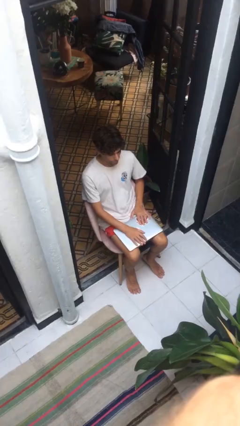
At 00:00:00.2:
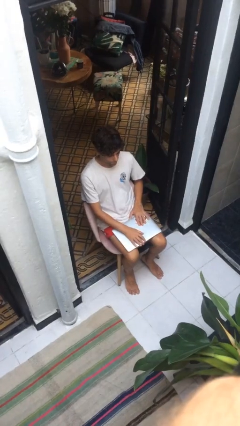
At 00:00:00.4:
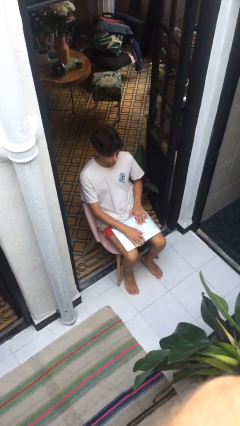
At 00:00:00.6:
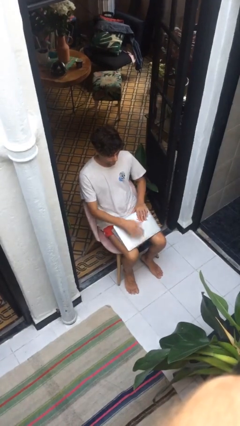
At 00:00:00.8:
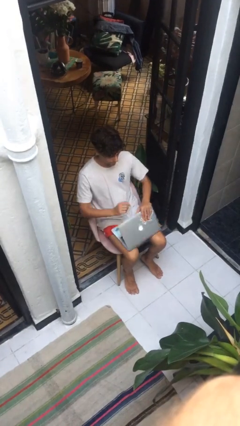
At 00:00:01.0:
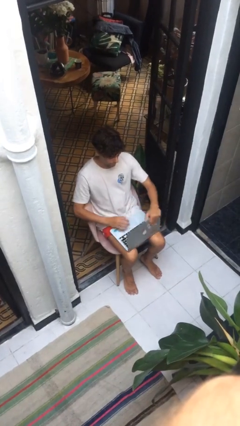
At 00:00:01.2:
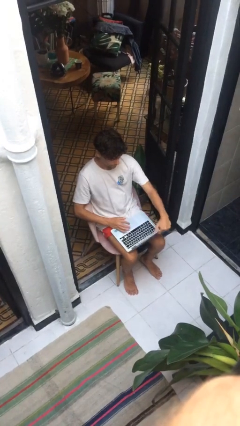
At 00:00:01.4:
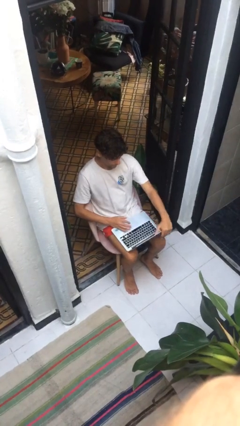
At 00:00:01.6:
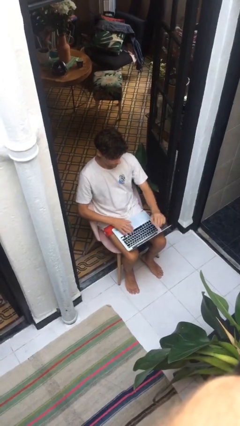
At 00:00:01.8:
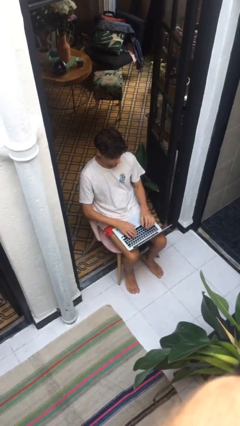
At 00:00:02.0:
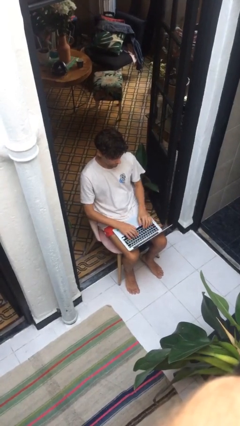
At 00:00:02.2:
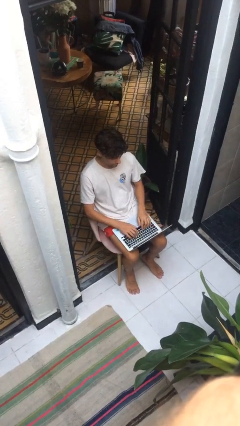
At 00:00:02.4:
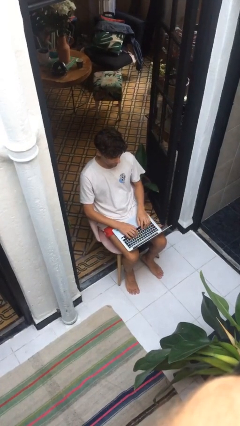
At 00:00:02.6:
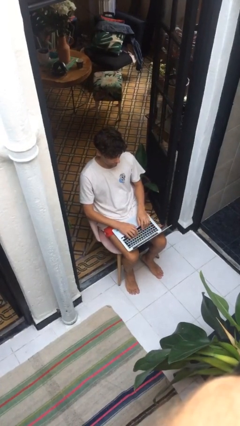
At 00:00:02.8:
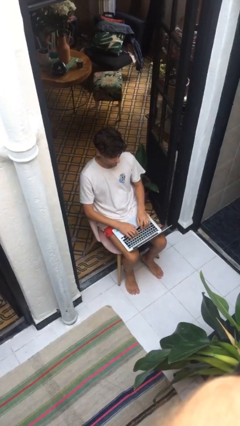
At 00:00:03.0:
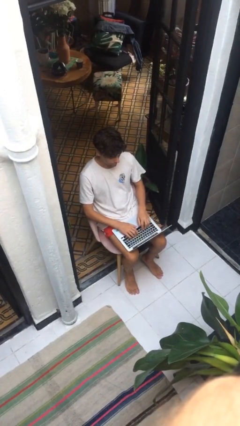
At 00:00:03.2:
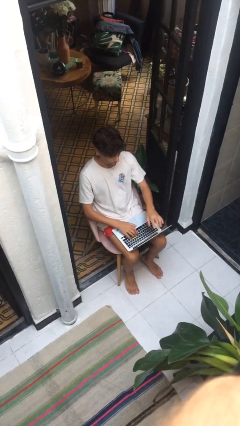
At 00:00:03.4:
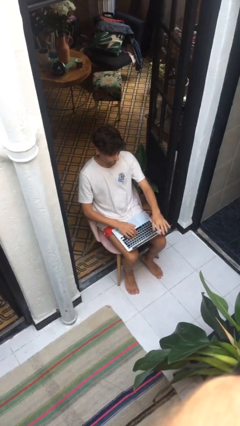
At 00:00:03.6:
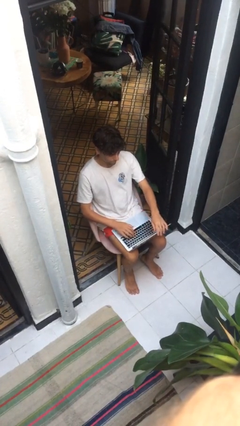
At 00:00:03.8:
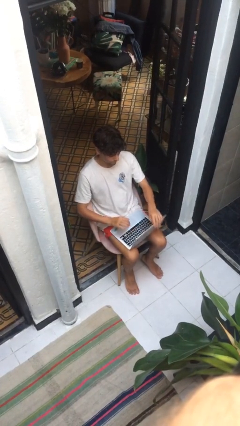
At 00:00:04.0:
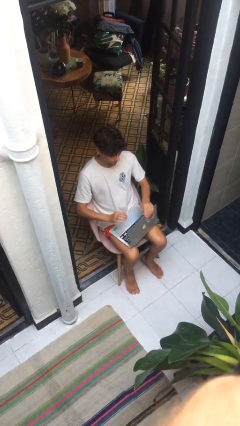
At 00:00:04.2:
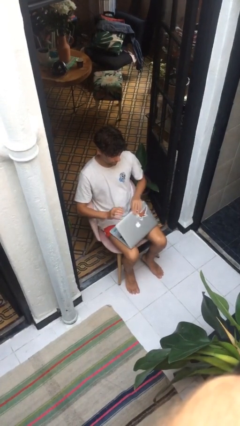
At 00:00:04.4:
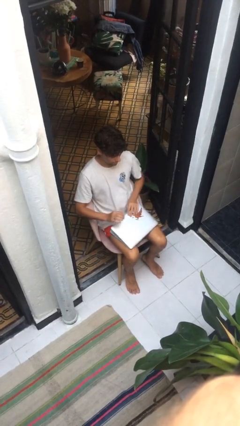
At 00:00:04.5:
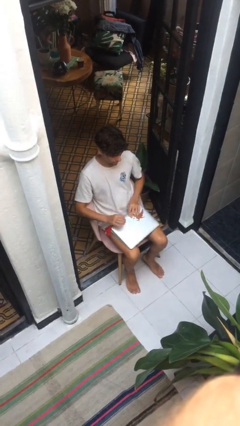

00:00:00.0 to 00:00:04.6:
person interacts with laptop

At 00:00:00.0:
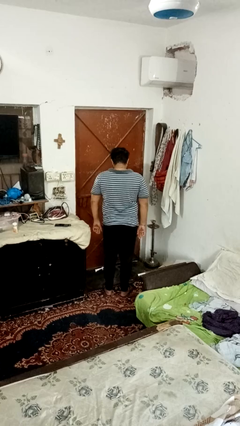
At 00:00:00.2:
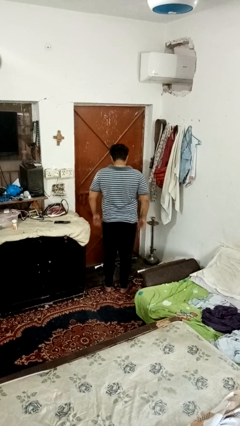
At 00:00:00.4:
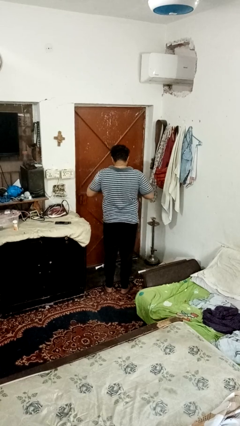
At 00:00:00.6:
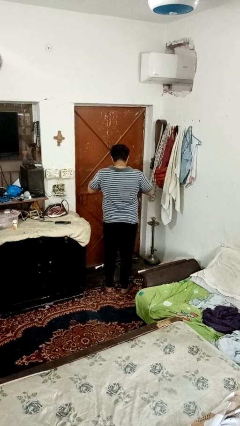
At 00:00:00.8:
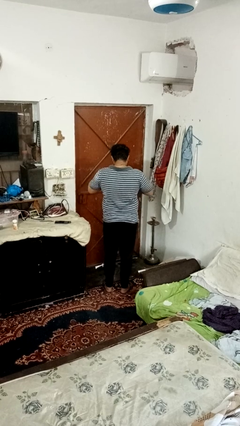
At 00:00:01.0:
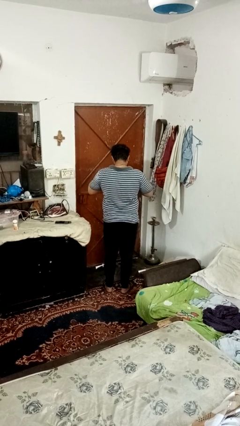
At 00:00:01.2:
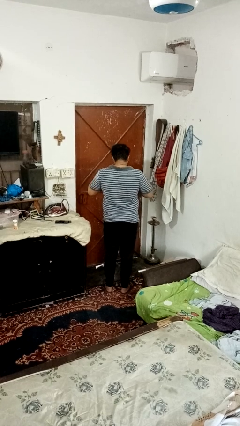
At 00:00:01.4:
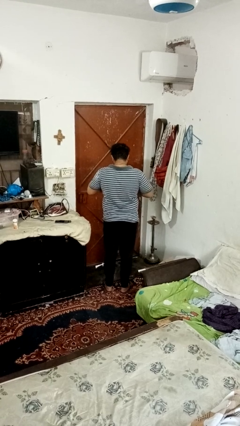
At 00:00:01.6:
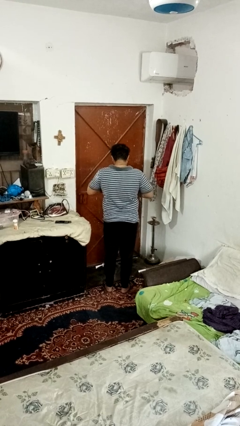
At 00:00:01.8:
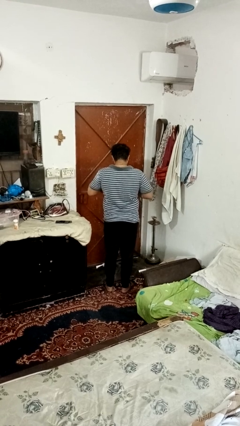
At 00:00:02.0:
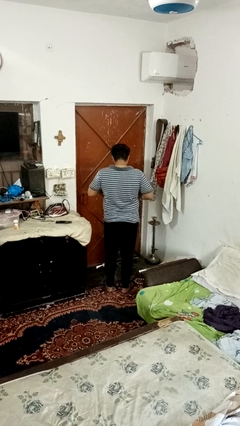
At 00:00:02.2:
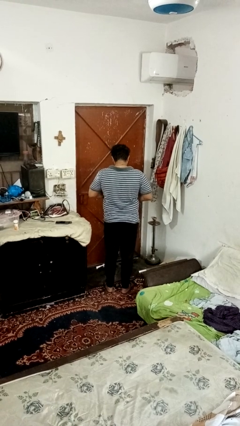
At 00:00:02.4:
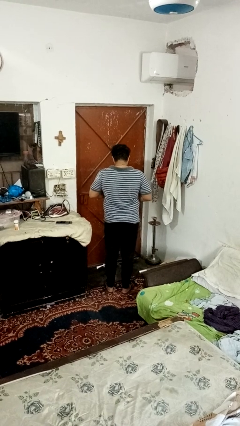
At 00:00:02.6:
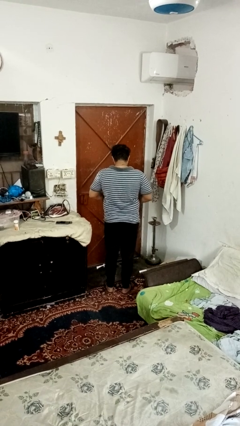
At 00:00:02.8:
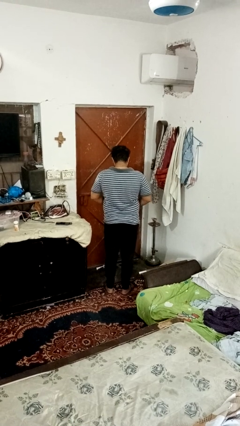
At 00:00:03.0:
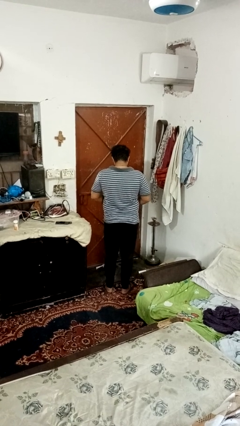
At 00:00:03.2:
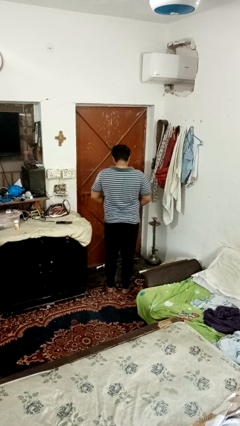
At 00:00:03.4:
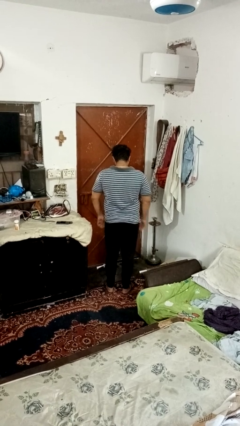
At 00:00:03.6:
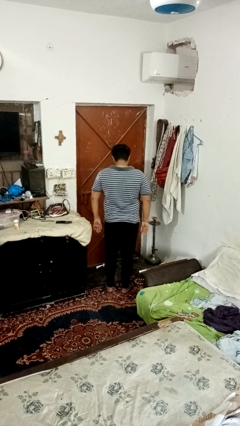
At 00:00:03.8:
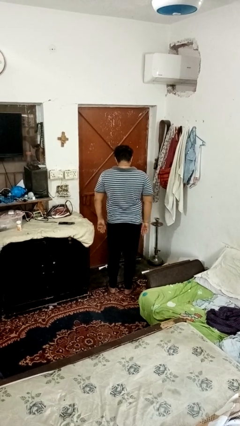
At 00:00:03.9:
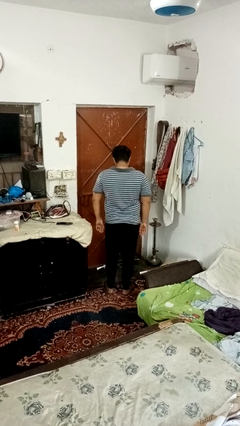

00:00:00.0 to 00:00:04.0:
person unbuttons shirt

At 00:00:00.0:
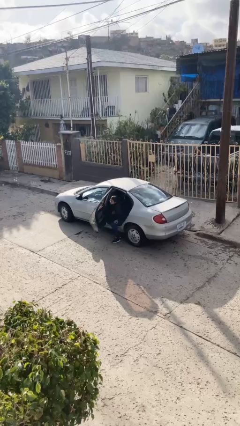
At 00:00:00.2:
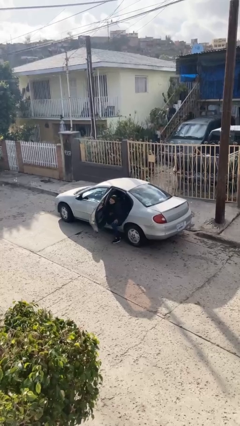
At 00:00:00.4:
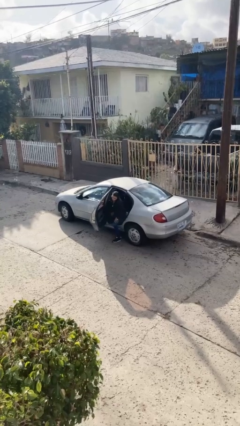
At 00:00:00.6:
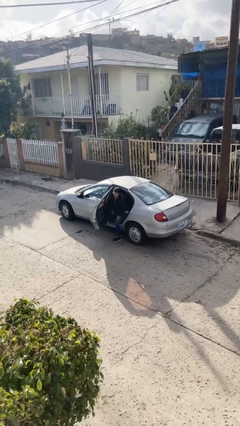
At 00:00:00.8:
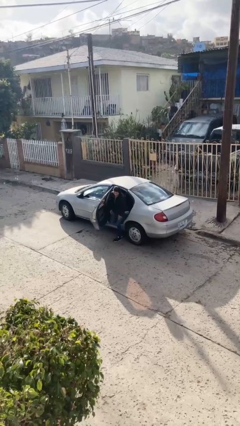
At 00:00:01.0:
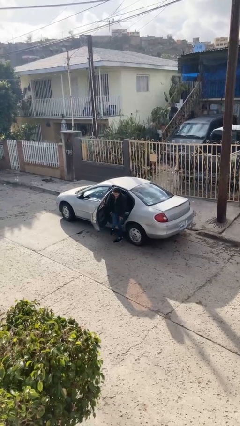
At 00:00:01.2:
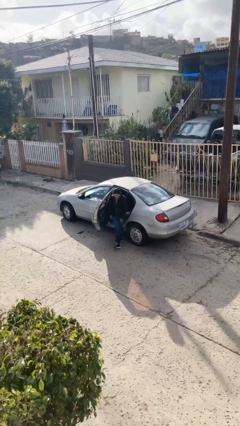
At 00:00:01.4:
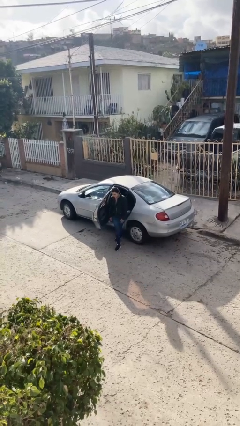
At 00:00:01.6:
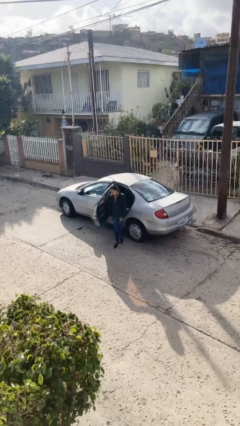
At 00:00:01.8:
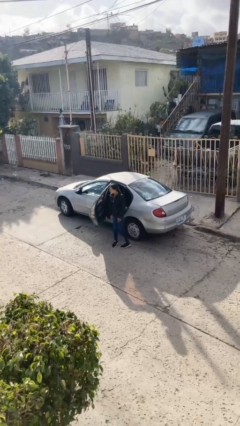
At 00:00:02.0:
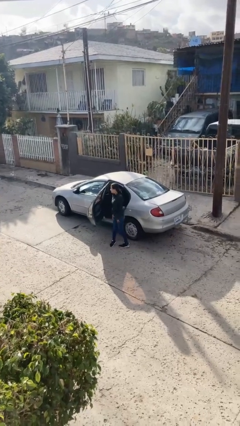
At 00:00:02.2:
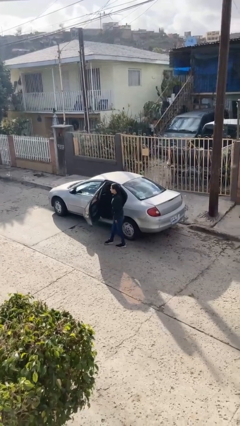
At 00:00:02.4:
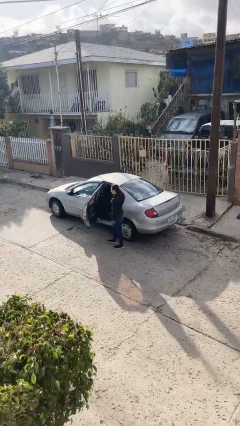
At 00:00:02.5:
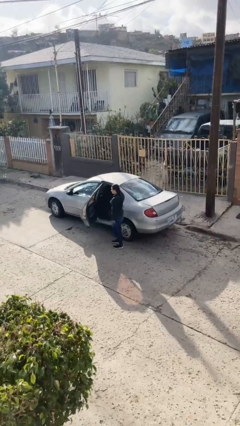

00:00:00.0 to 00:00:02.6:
person exits car

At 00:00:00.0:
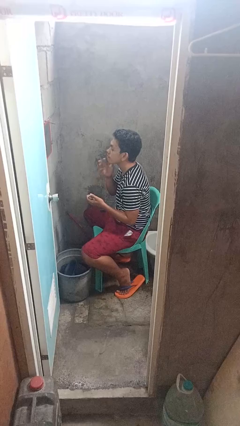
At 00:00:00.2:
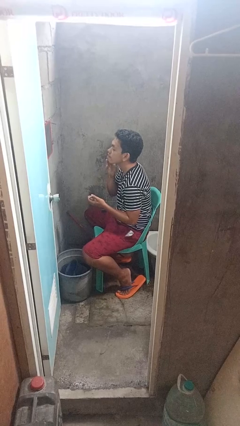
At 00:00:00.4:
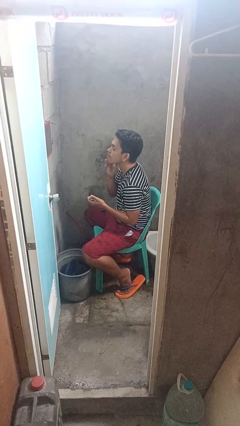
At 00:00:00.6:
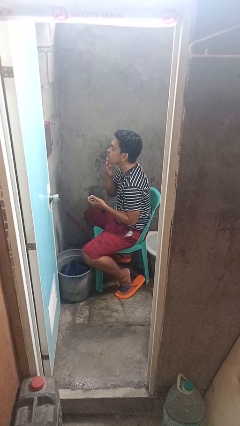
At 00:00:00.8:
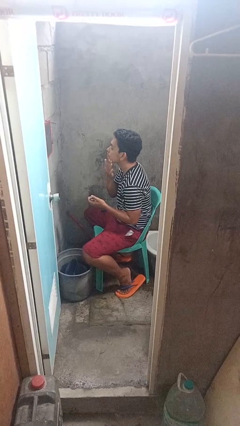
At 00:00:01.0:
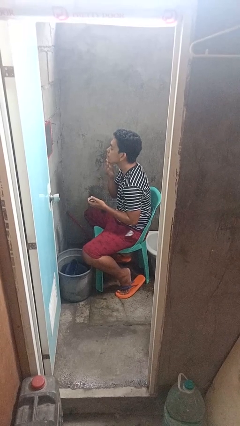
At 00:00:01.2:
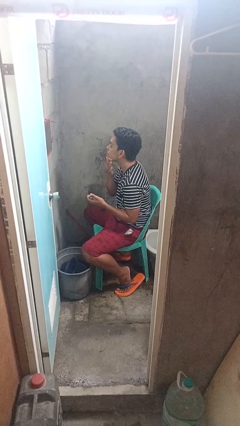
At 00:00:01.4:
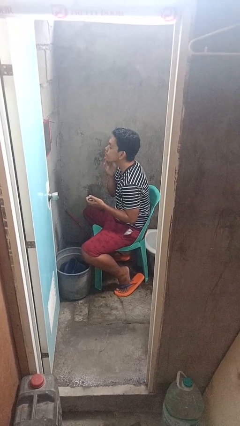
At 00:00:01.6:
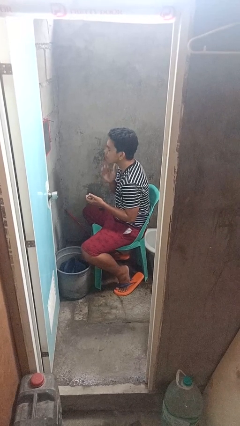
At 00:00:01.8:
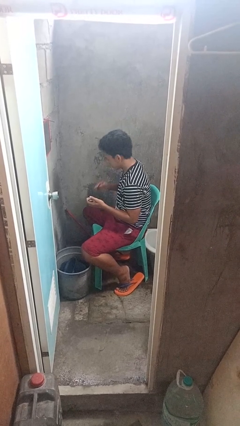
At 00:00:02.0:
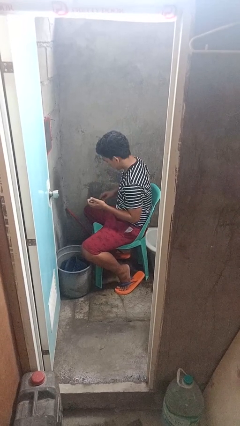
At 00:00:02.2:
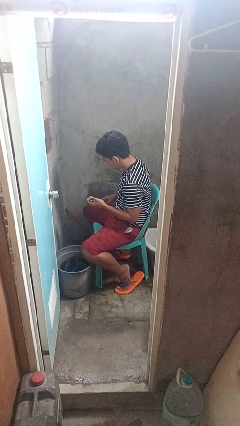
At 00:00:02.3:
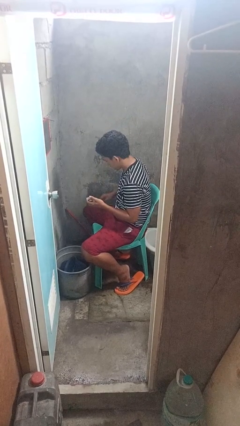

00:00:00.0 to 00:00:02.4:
person applies shaving cream

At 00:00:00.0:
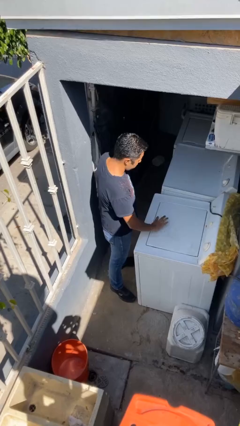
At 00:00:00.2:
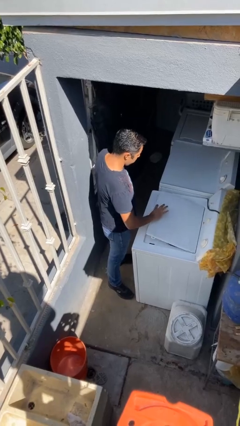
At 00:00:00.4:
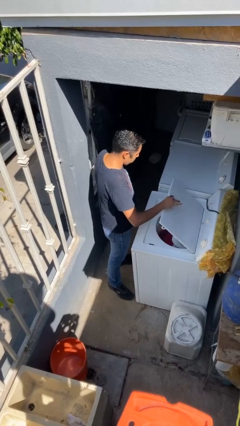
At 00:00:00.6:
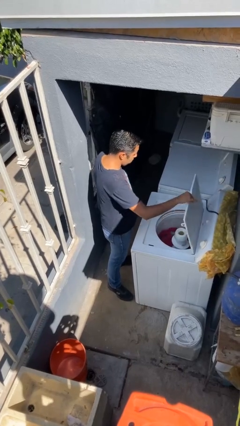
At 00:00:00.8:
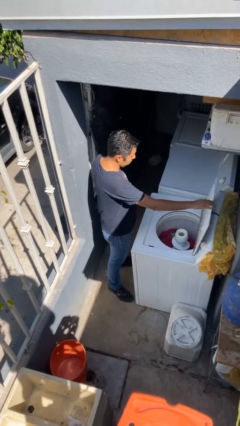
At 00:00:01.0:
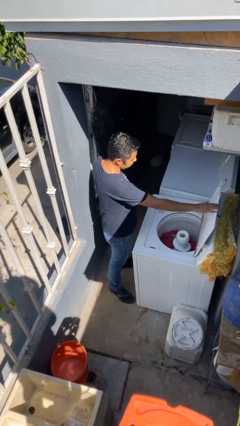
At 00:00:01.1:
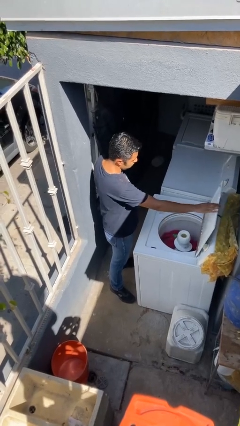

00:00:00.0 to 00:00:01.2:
person opens clothes washer

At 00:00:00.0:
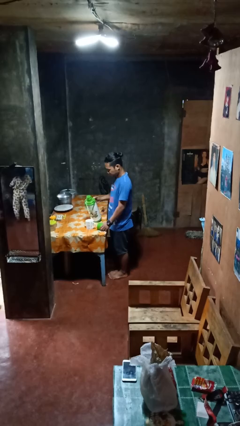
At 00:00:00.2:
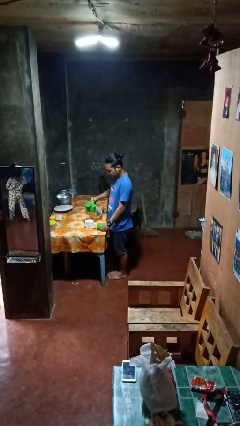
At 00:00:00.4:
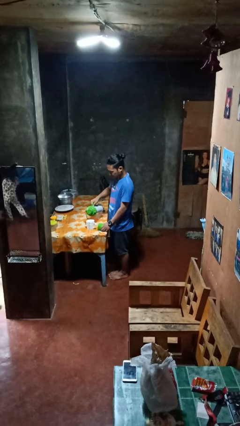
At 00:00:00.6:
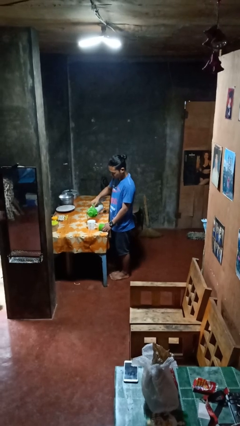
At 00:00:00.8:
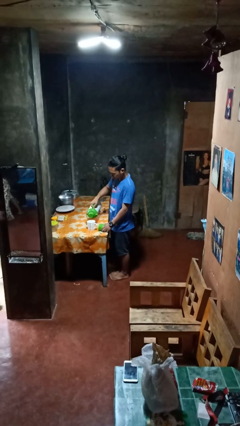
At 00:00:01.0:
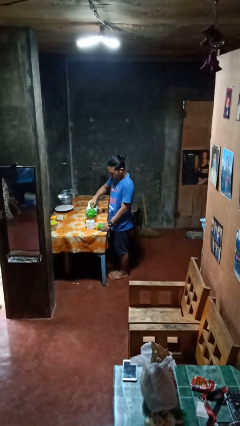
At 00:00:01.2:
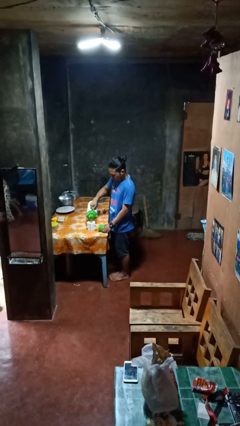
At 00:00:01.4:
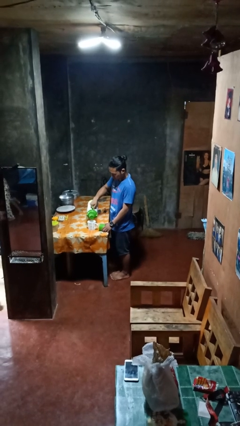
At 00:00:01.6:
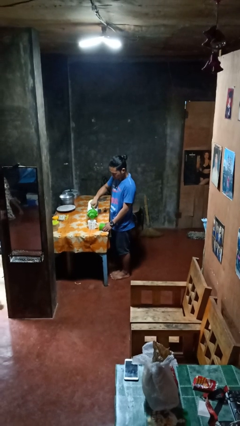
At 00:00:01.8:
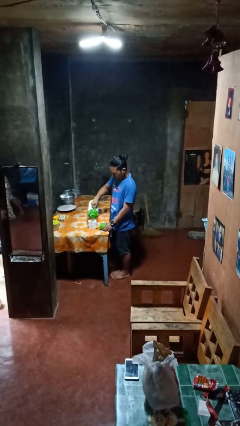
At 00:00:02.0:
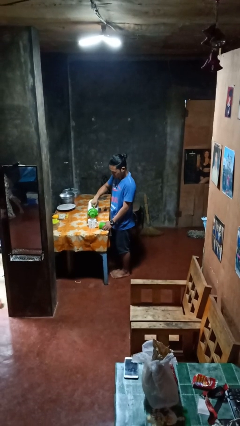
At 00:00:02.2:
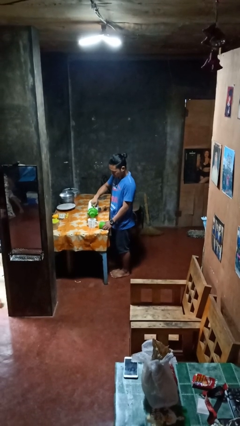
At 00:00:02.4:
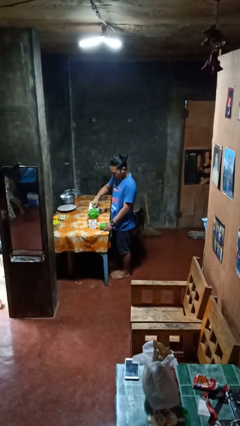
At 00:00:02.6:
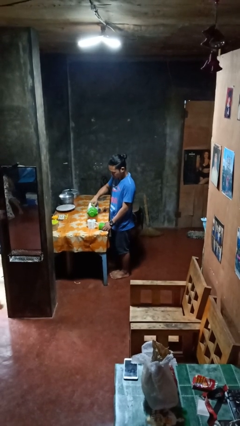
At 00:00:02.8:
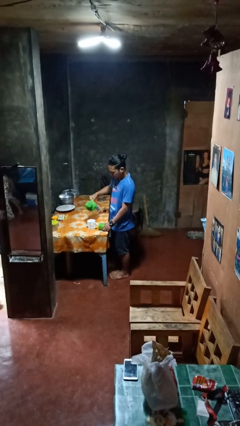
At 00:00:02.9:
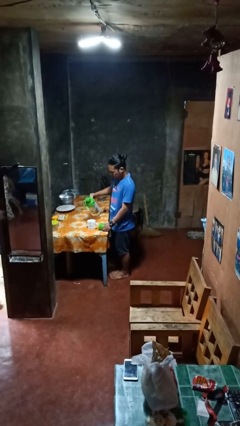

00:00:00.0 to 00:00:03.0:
person pours coffee into mug
